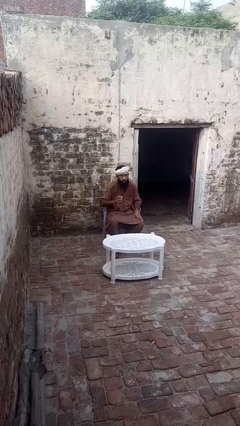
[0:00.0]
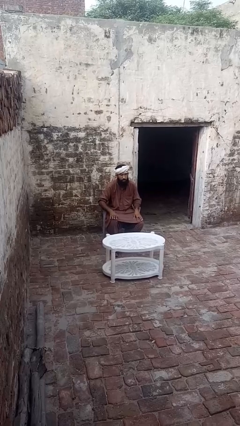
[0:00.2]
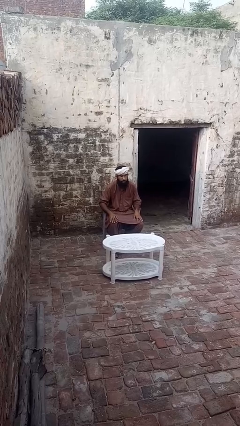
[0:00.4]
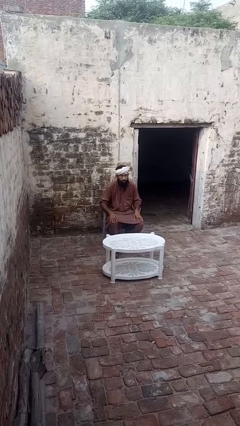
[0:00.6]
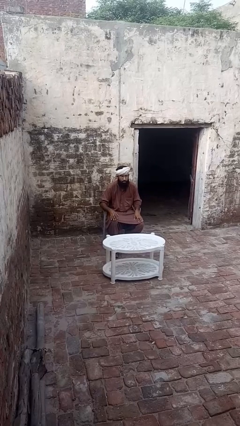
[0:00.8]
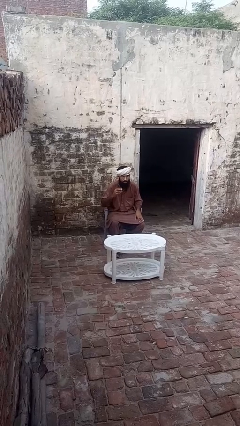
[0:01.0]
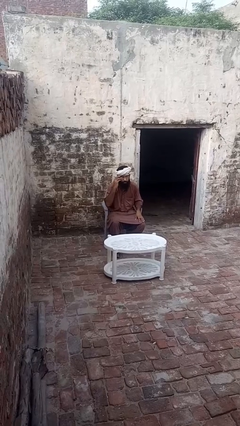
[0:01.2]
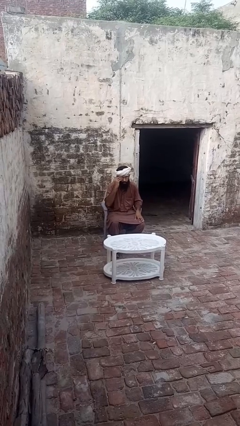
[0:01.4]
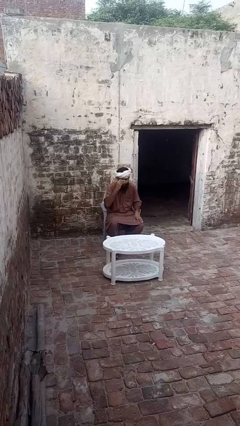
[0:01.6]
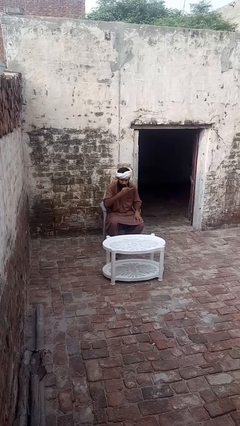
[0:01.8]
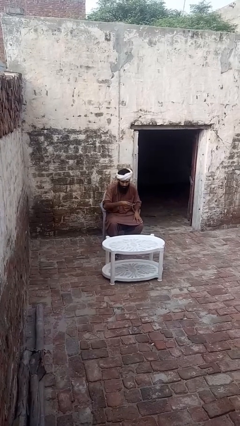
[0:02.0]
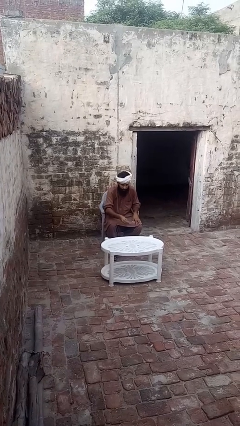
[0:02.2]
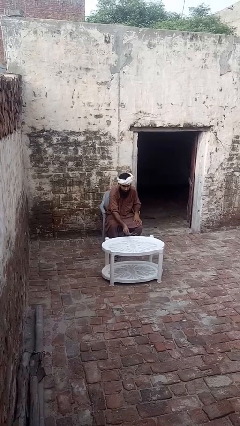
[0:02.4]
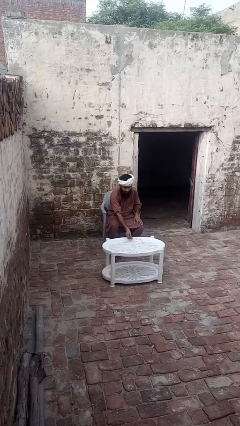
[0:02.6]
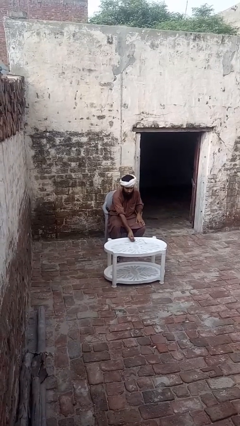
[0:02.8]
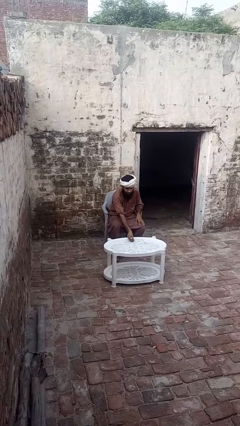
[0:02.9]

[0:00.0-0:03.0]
person takes off glasses

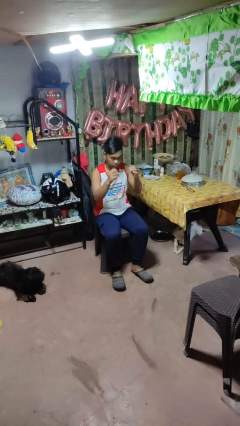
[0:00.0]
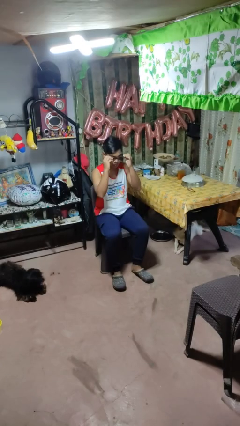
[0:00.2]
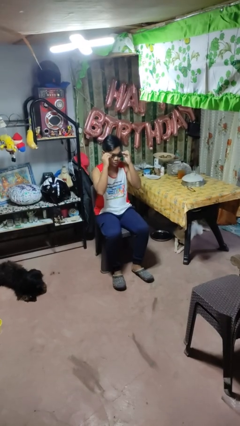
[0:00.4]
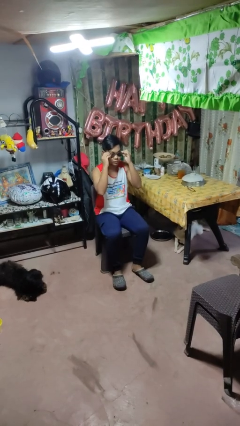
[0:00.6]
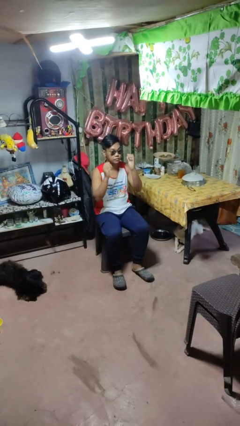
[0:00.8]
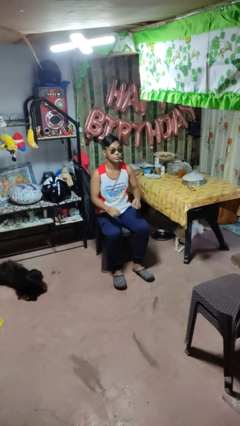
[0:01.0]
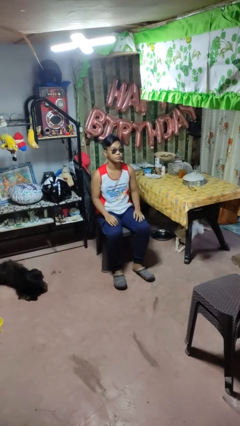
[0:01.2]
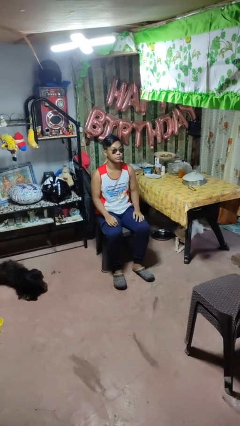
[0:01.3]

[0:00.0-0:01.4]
person puts on sunglasses

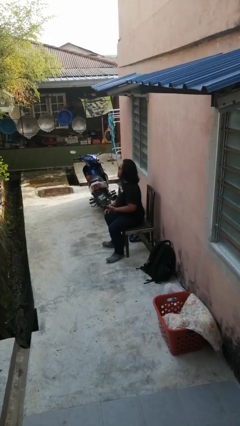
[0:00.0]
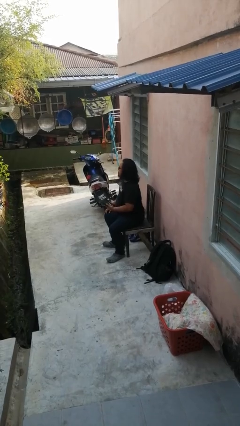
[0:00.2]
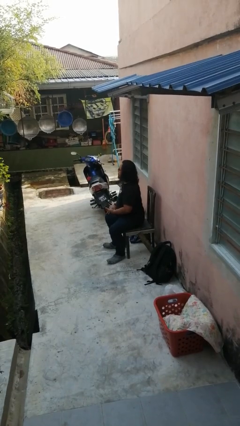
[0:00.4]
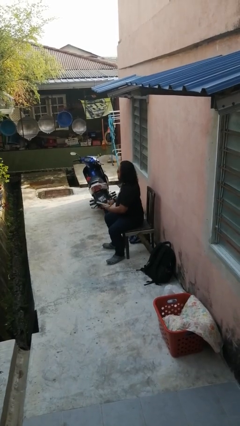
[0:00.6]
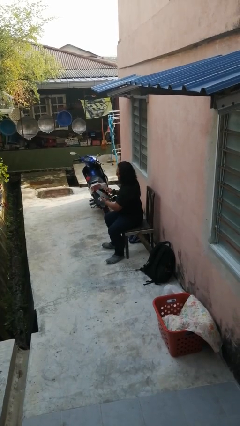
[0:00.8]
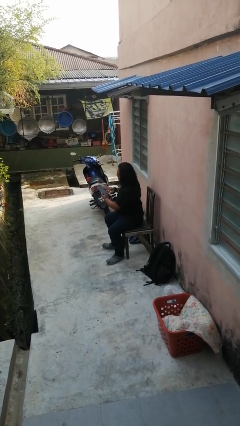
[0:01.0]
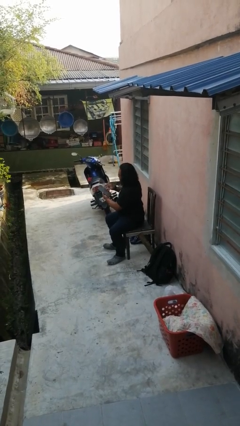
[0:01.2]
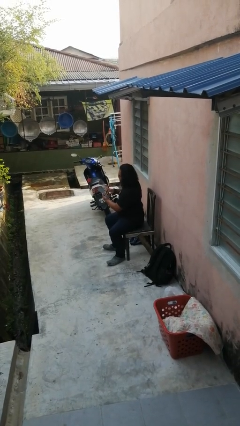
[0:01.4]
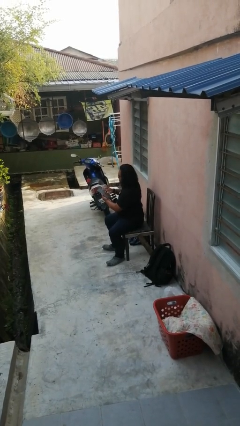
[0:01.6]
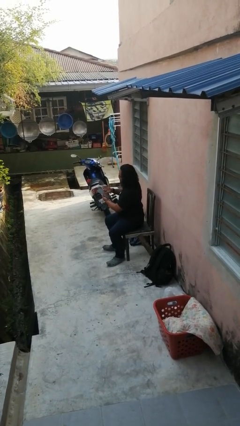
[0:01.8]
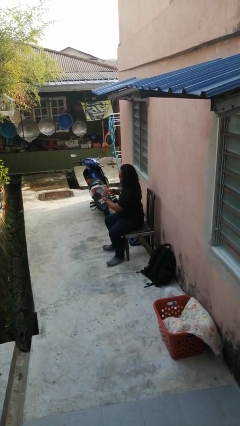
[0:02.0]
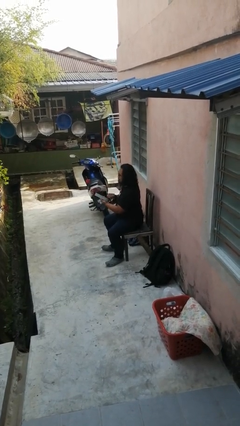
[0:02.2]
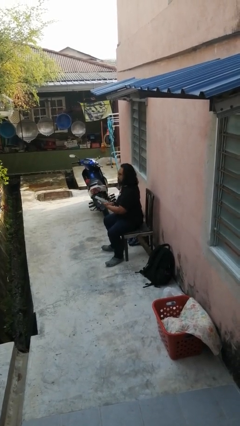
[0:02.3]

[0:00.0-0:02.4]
person interacts with tablet

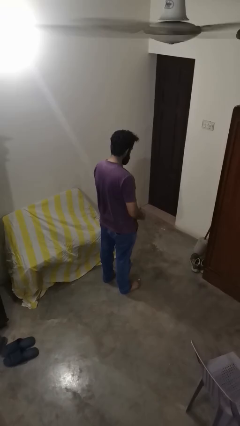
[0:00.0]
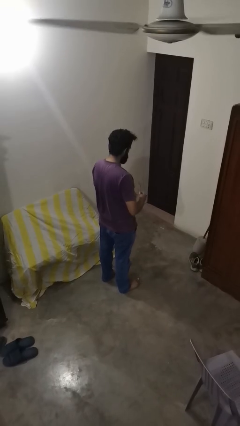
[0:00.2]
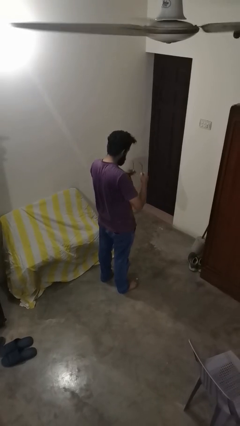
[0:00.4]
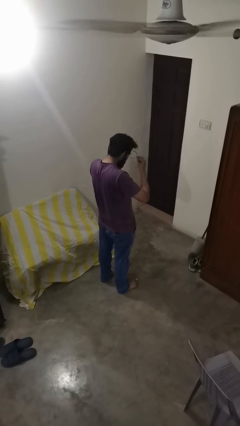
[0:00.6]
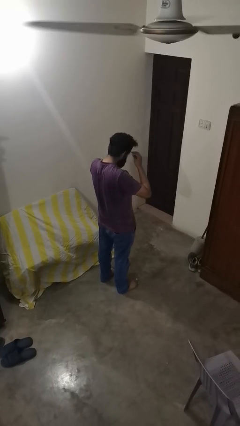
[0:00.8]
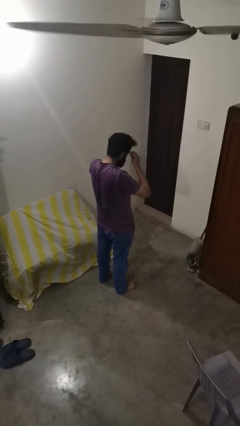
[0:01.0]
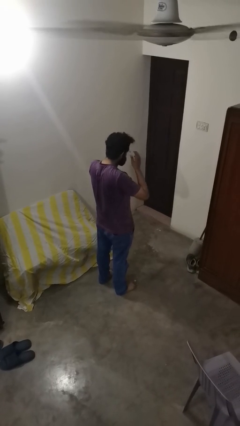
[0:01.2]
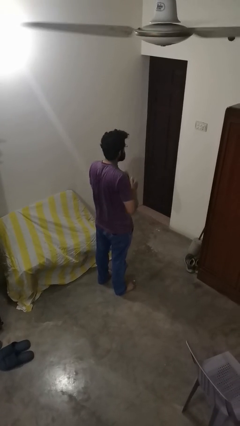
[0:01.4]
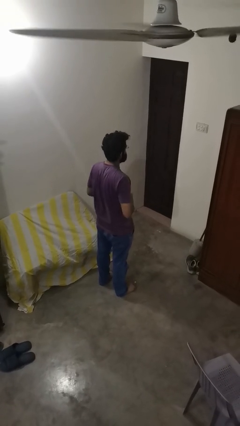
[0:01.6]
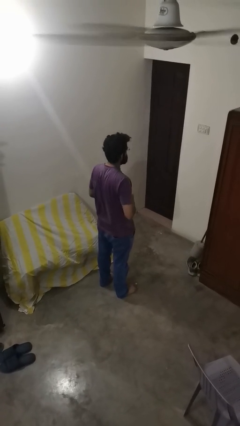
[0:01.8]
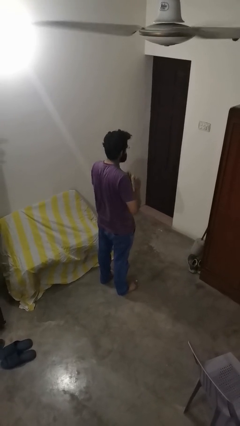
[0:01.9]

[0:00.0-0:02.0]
person puts on glasses

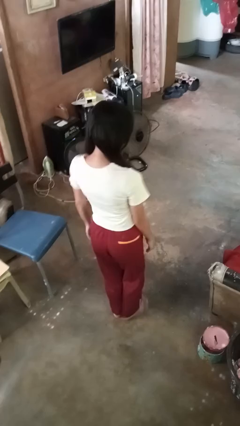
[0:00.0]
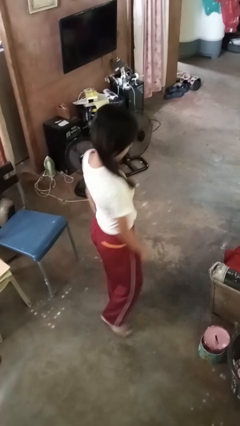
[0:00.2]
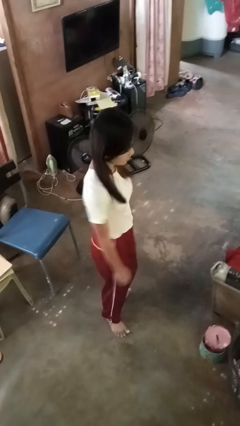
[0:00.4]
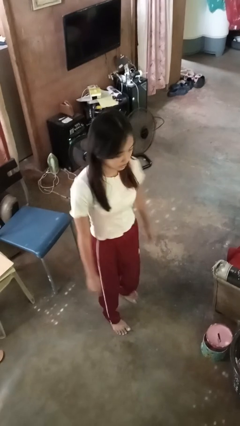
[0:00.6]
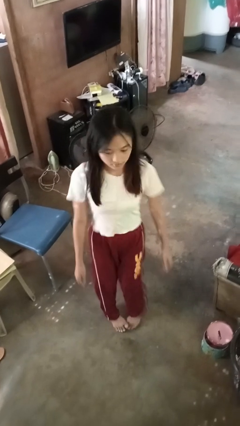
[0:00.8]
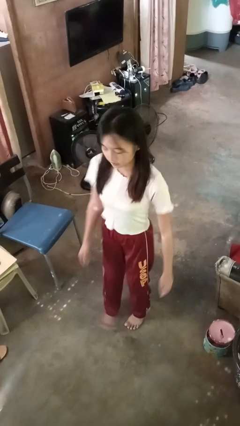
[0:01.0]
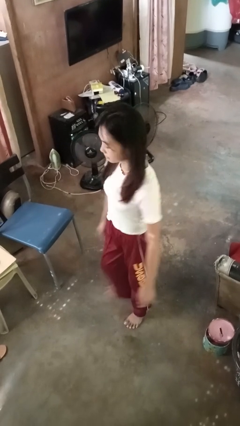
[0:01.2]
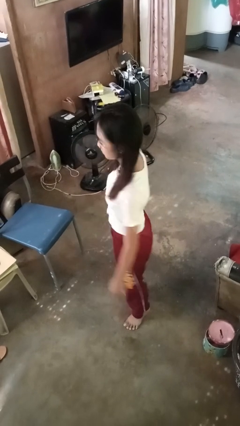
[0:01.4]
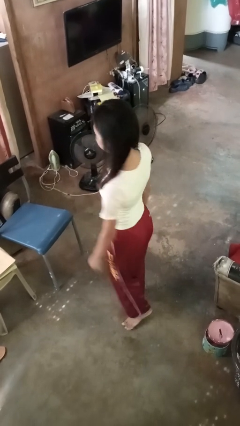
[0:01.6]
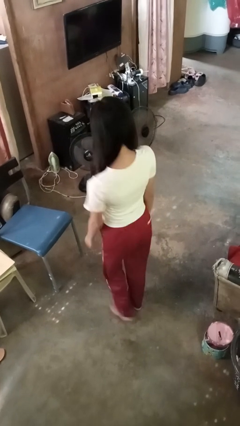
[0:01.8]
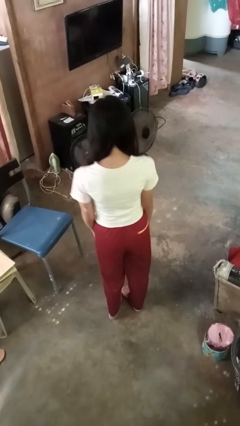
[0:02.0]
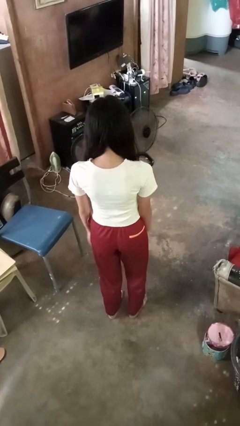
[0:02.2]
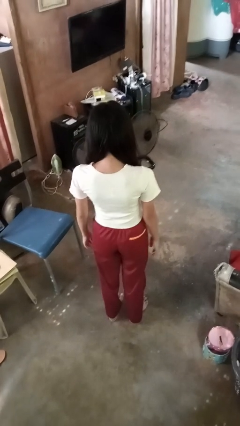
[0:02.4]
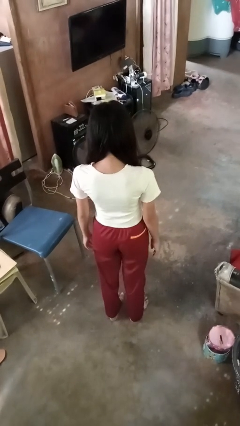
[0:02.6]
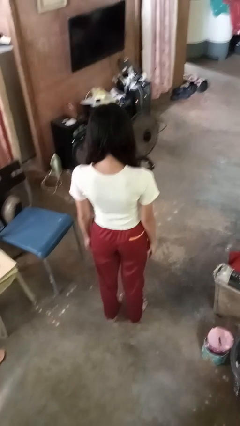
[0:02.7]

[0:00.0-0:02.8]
person twirls

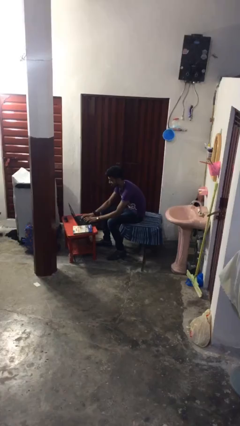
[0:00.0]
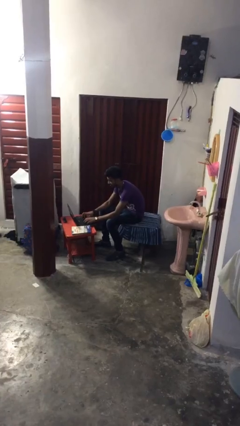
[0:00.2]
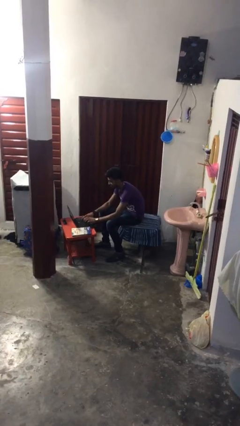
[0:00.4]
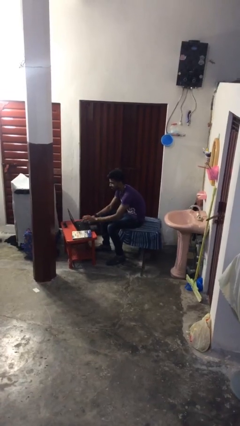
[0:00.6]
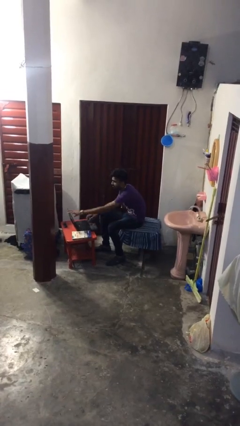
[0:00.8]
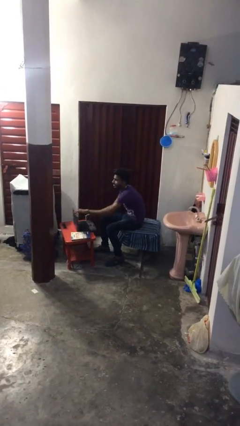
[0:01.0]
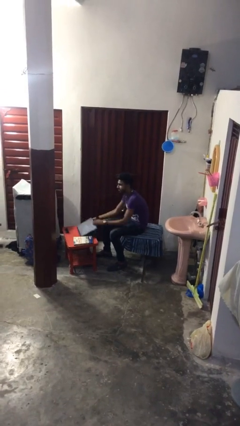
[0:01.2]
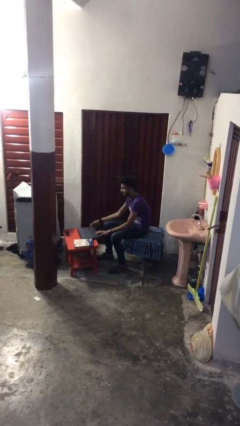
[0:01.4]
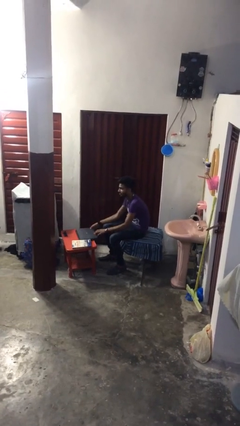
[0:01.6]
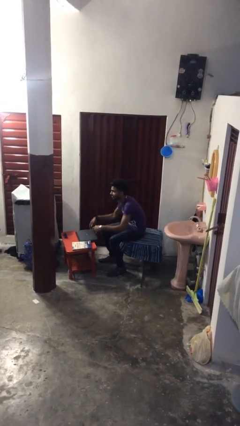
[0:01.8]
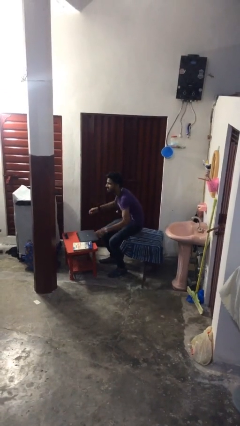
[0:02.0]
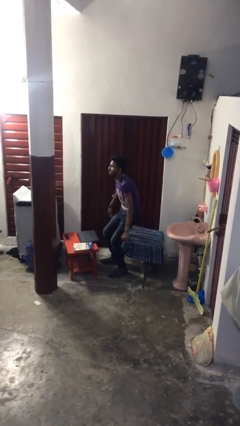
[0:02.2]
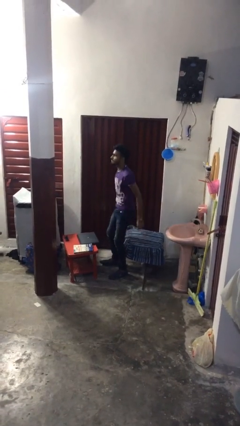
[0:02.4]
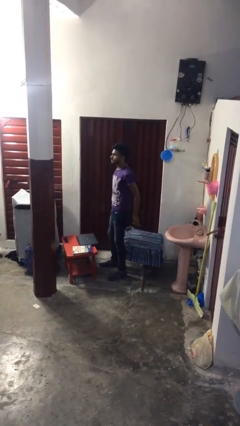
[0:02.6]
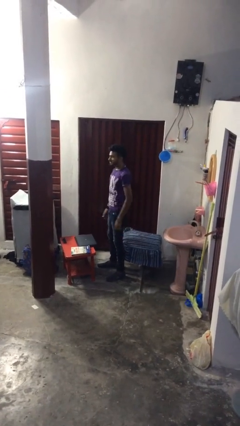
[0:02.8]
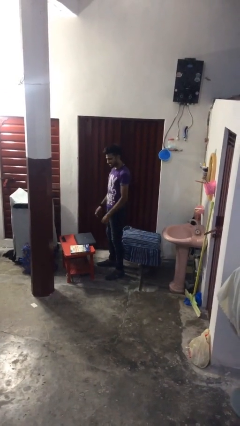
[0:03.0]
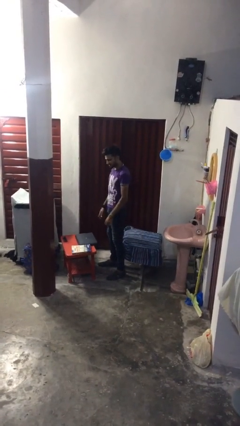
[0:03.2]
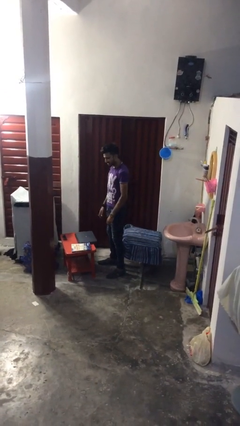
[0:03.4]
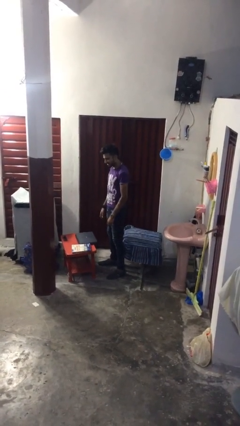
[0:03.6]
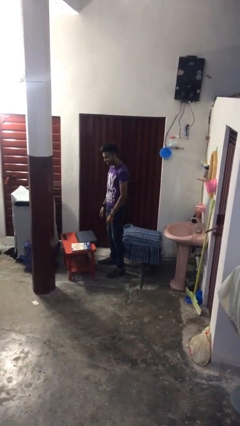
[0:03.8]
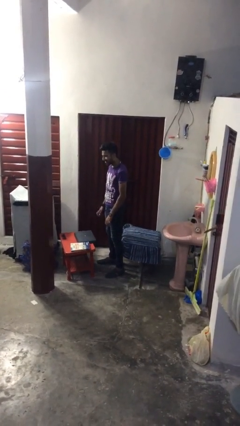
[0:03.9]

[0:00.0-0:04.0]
person stands up

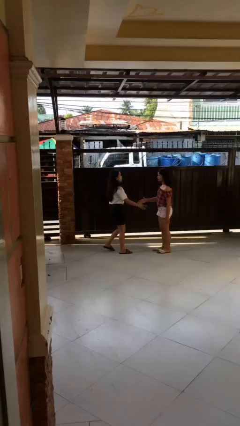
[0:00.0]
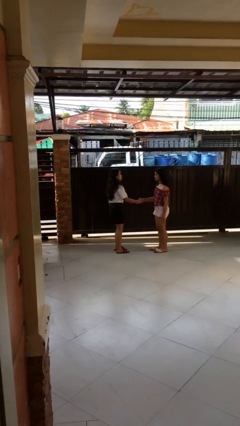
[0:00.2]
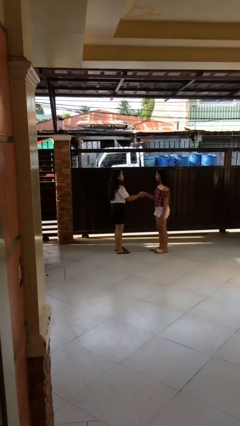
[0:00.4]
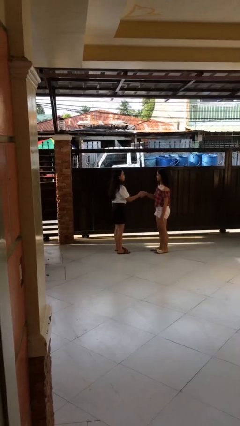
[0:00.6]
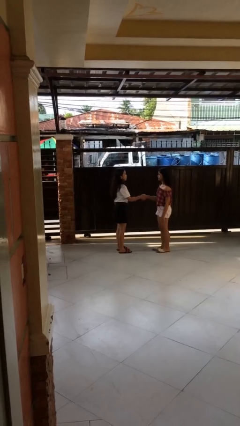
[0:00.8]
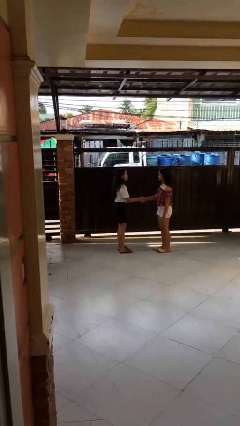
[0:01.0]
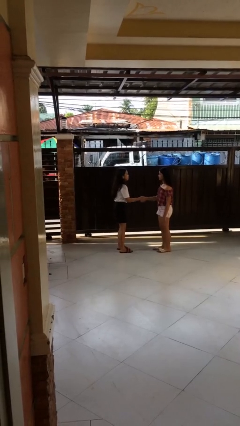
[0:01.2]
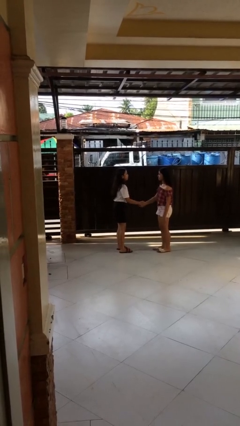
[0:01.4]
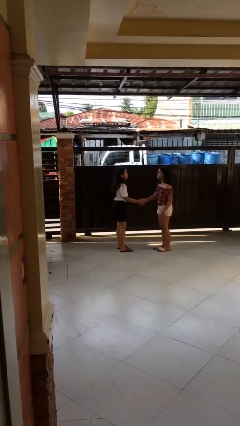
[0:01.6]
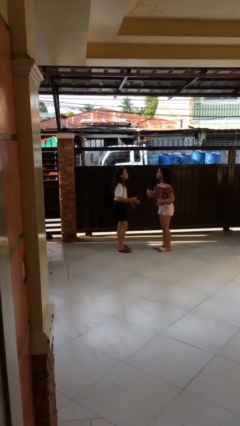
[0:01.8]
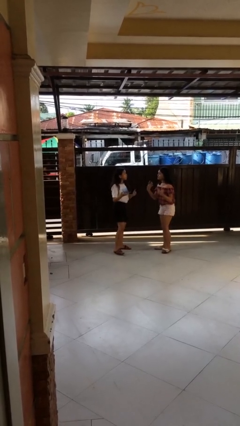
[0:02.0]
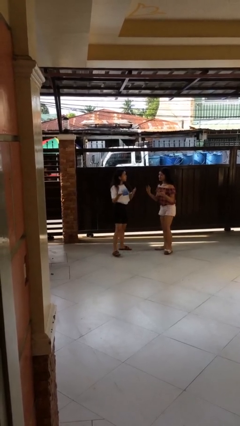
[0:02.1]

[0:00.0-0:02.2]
person shakes hand
